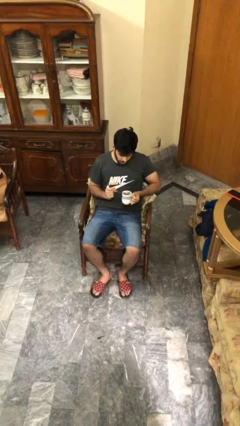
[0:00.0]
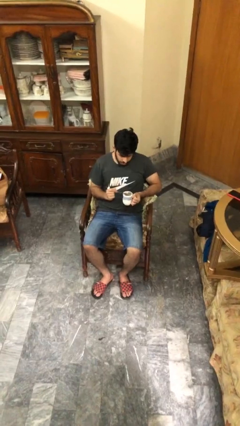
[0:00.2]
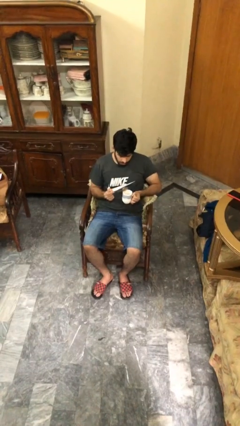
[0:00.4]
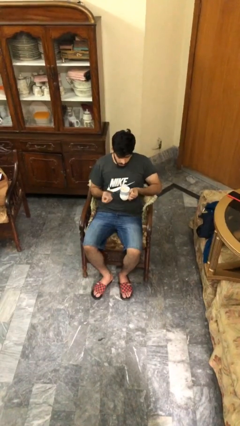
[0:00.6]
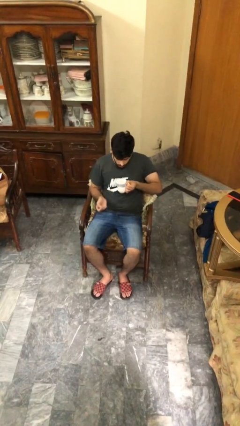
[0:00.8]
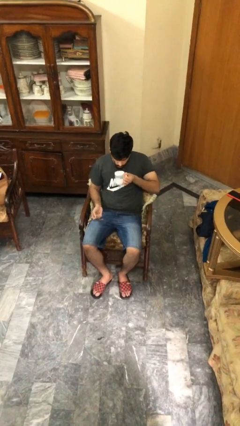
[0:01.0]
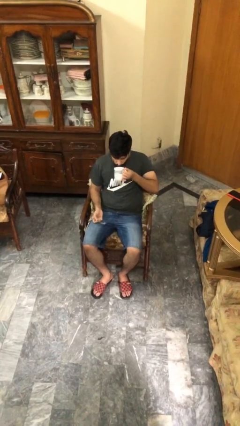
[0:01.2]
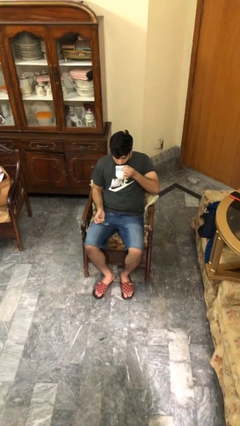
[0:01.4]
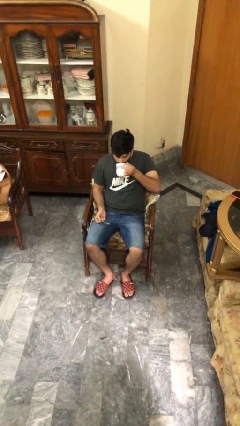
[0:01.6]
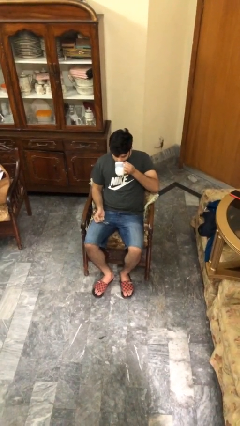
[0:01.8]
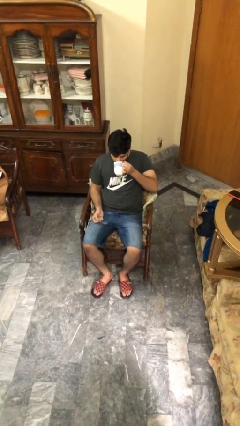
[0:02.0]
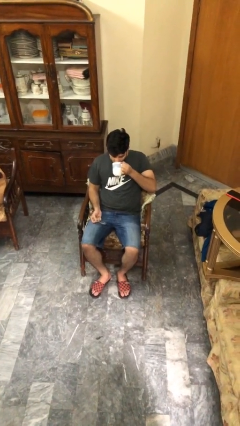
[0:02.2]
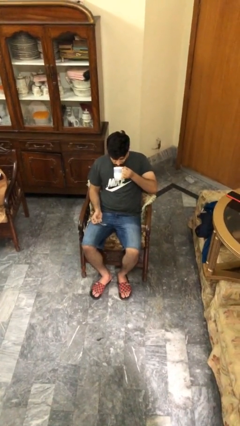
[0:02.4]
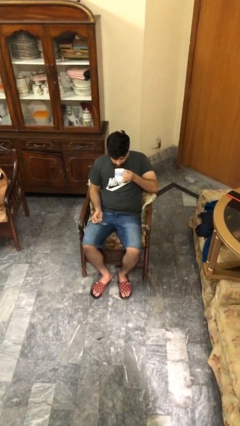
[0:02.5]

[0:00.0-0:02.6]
person drinks from mug

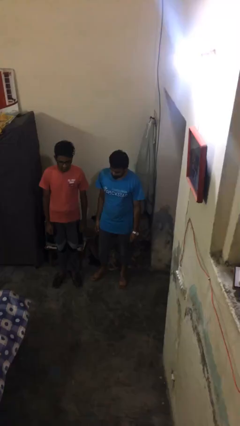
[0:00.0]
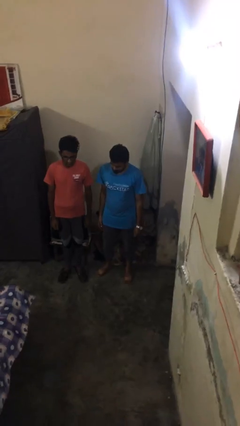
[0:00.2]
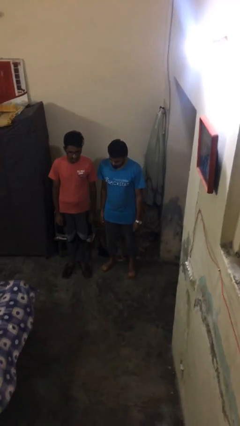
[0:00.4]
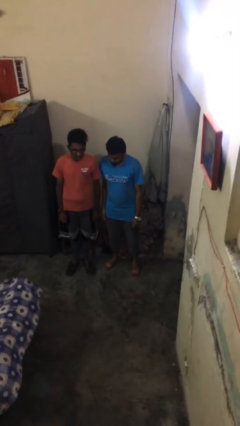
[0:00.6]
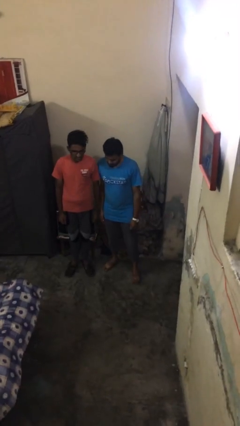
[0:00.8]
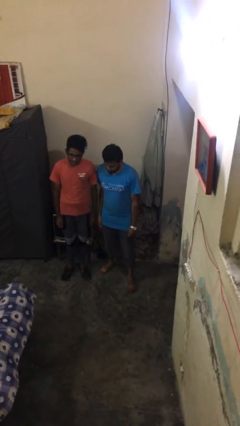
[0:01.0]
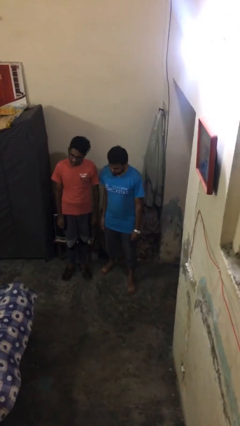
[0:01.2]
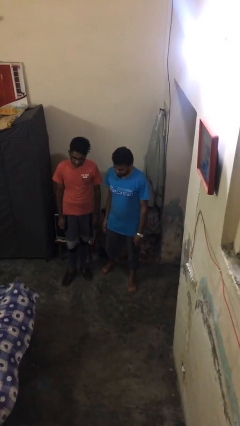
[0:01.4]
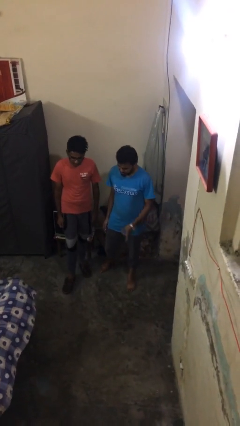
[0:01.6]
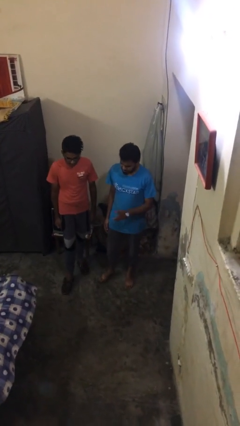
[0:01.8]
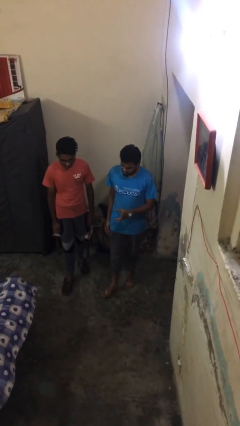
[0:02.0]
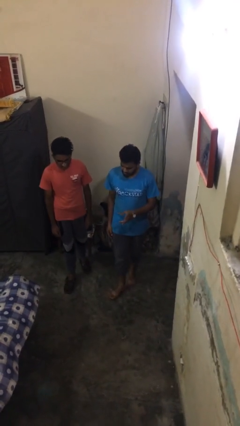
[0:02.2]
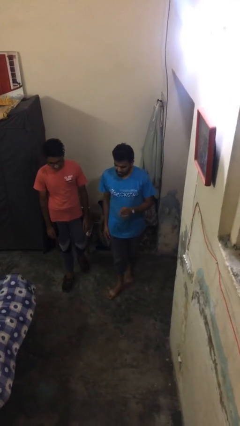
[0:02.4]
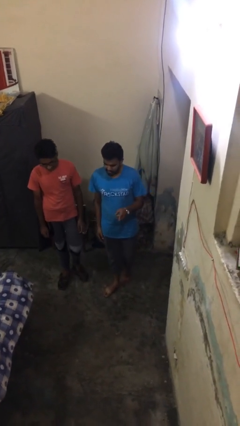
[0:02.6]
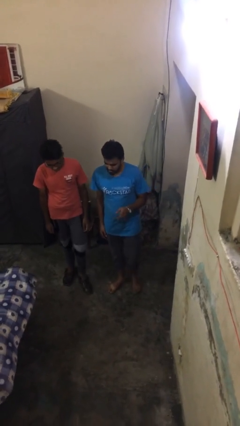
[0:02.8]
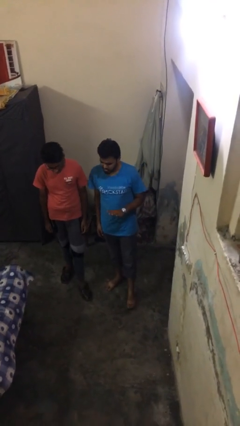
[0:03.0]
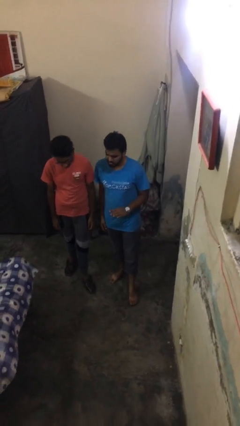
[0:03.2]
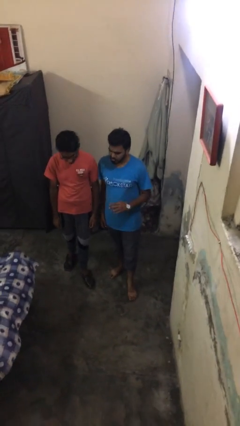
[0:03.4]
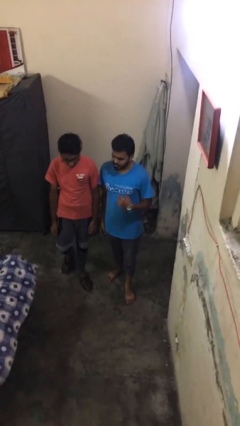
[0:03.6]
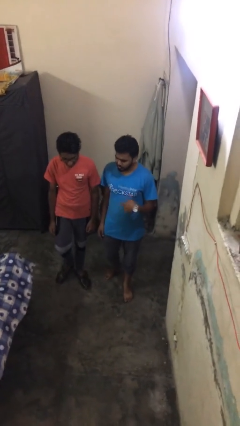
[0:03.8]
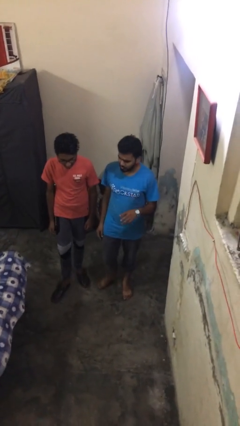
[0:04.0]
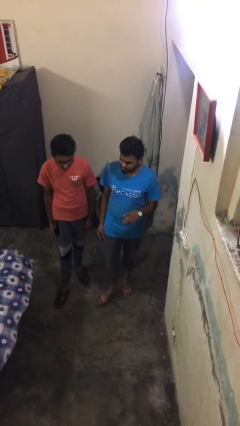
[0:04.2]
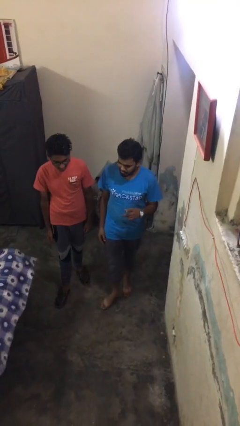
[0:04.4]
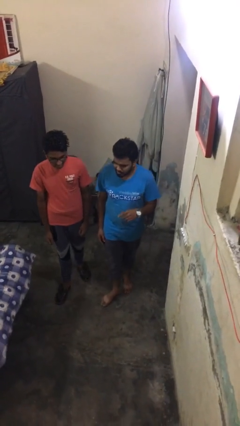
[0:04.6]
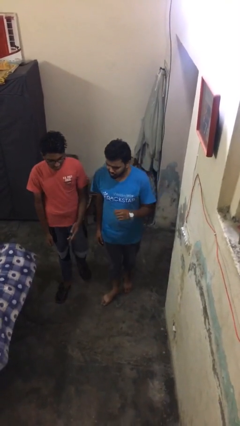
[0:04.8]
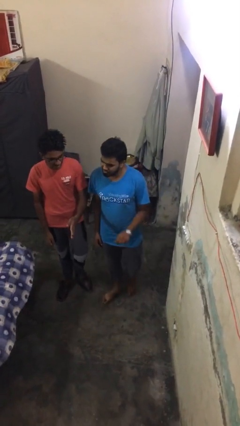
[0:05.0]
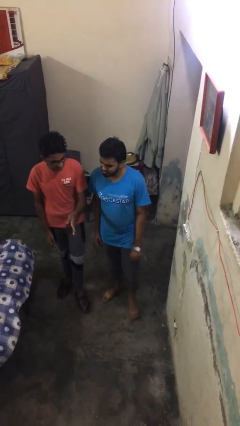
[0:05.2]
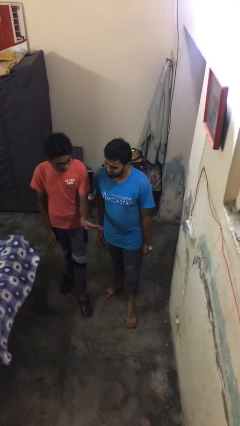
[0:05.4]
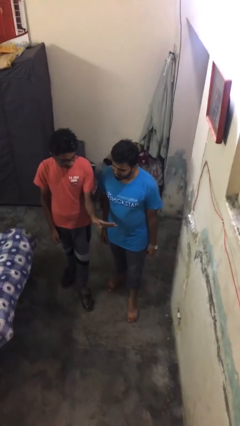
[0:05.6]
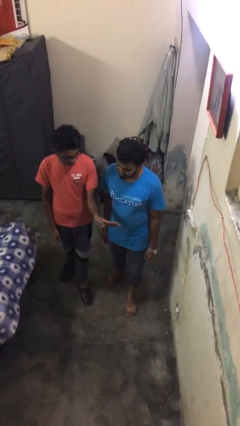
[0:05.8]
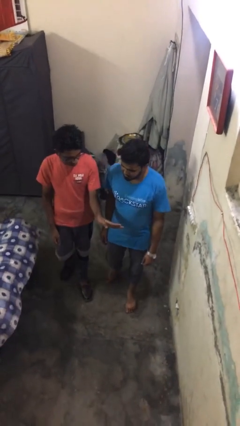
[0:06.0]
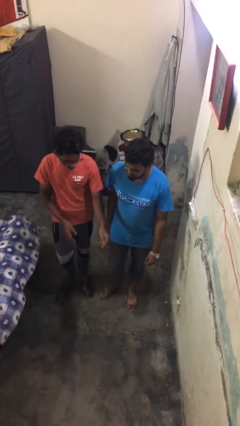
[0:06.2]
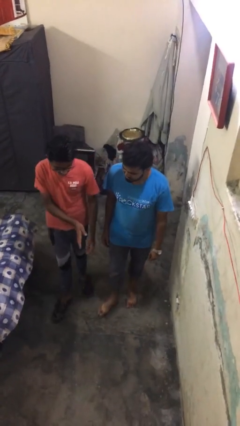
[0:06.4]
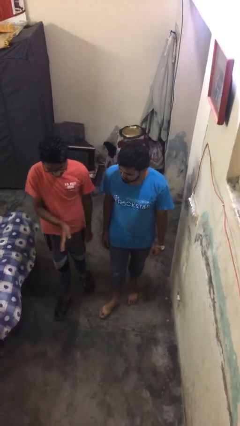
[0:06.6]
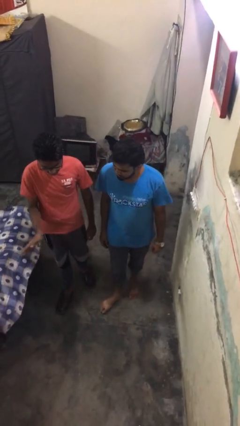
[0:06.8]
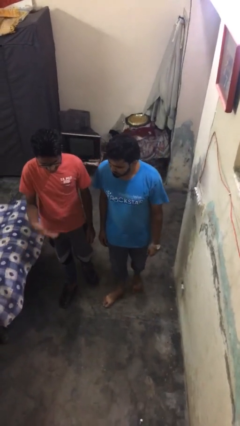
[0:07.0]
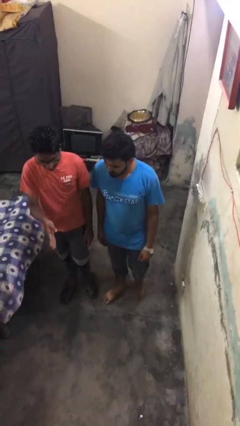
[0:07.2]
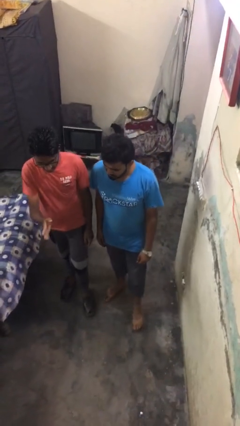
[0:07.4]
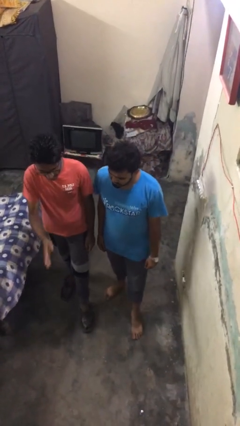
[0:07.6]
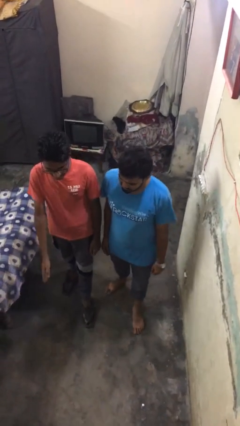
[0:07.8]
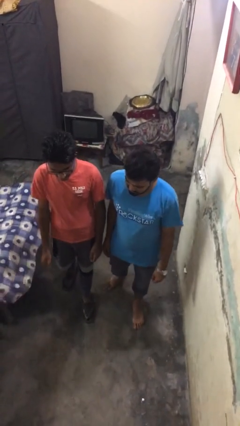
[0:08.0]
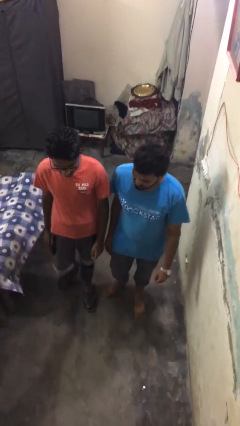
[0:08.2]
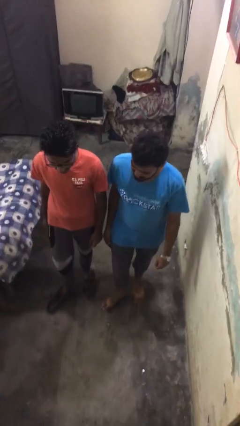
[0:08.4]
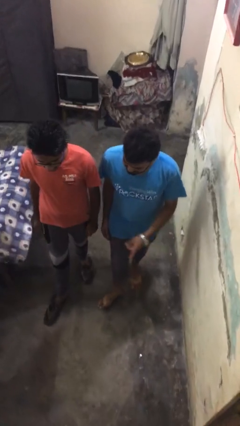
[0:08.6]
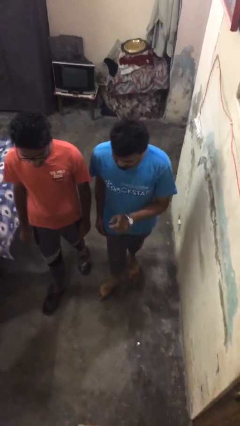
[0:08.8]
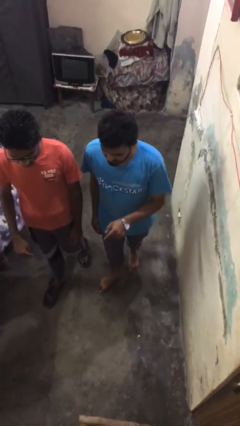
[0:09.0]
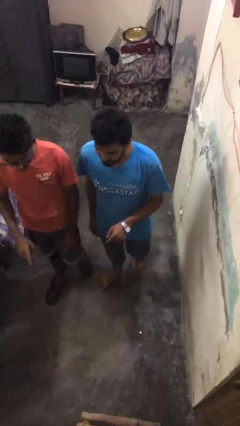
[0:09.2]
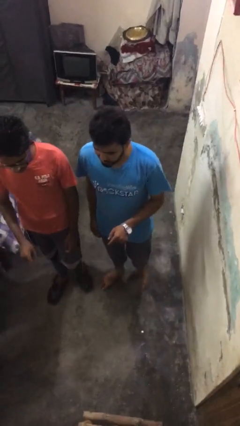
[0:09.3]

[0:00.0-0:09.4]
person talks to person

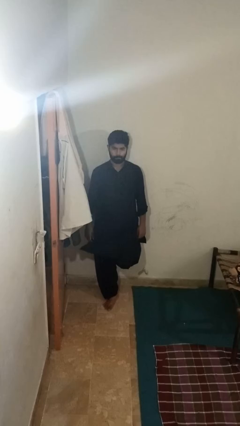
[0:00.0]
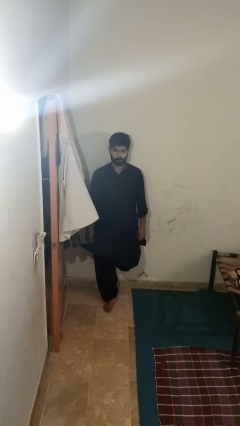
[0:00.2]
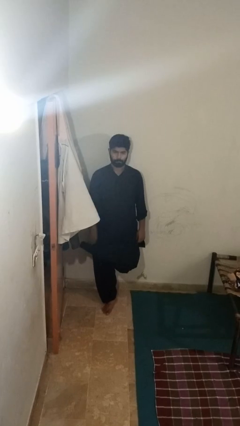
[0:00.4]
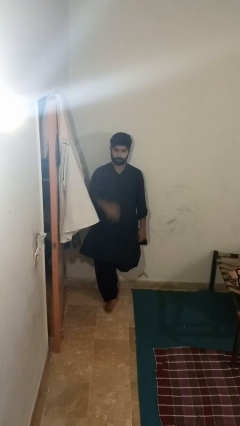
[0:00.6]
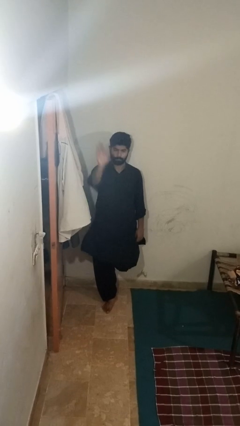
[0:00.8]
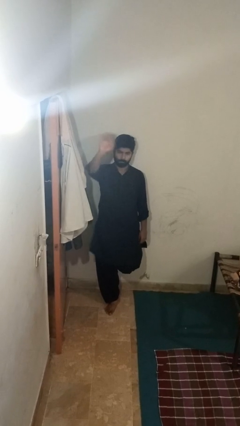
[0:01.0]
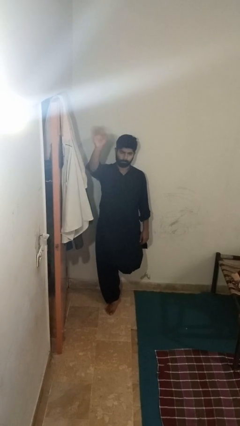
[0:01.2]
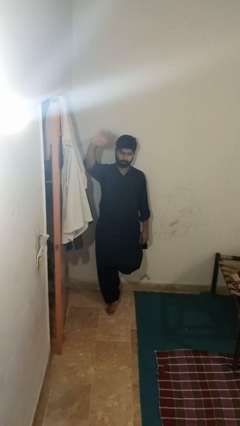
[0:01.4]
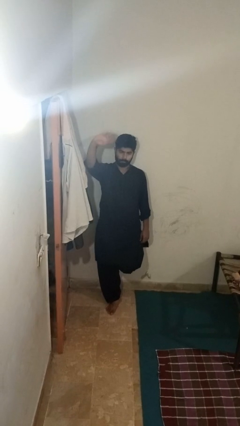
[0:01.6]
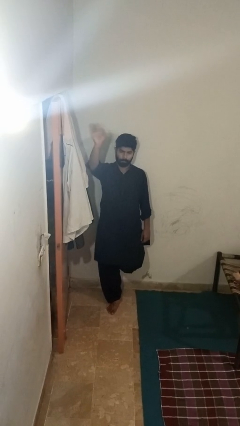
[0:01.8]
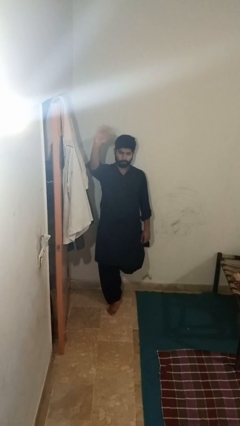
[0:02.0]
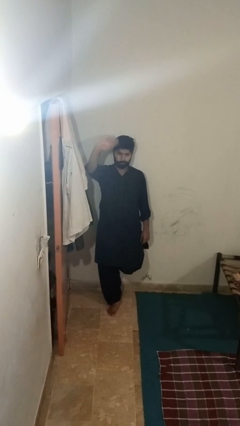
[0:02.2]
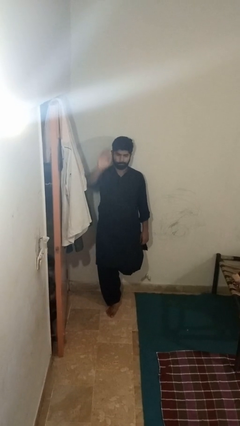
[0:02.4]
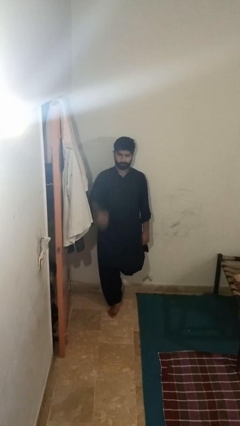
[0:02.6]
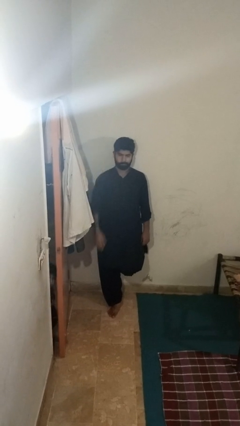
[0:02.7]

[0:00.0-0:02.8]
person waves at person

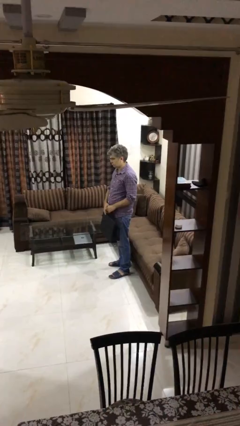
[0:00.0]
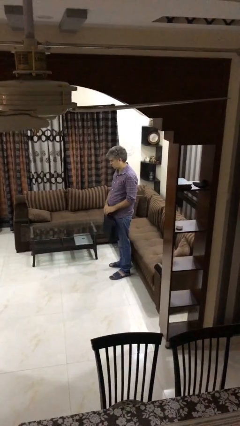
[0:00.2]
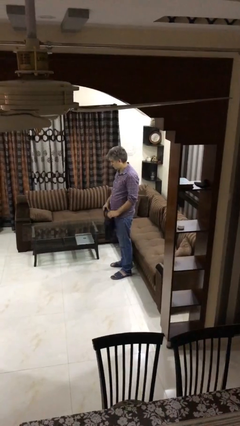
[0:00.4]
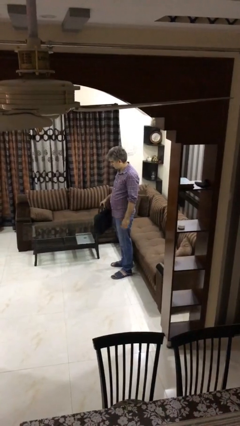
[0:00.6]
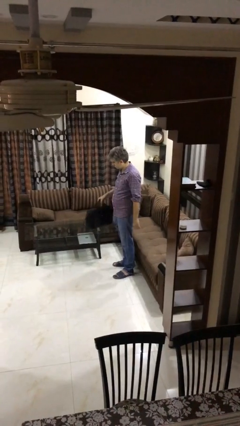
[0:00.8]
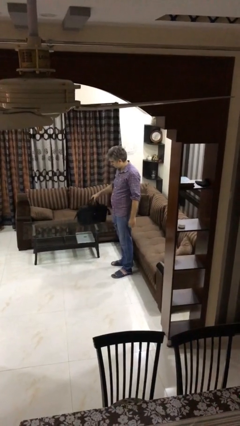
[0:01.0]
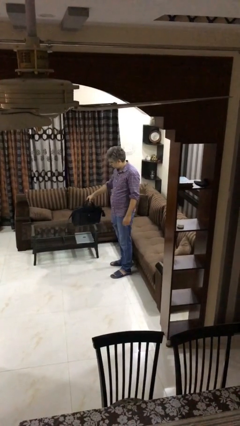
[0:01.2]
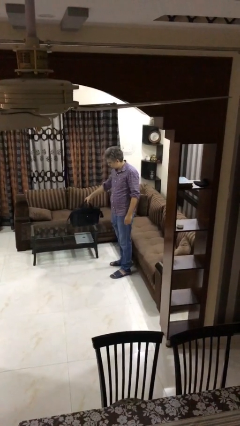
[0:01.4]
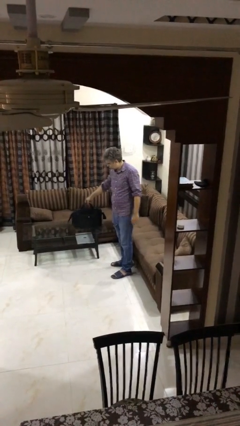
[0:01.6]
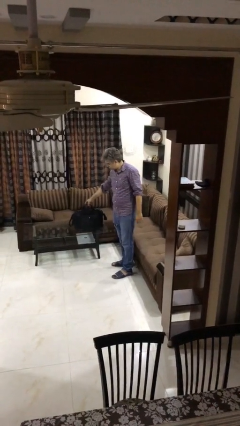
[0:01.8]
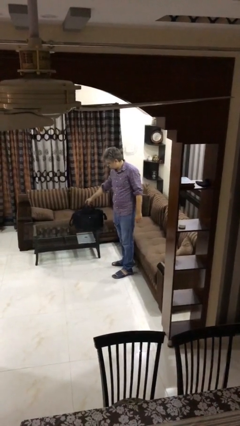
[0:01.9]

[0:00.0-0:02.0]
person puts down object on table

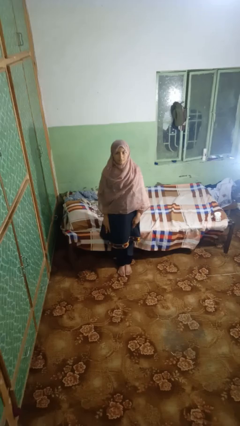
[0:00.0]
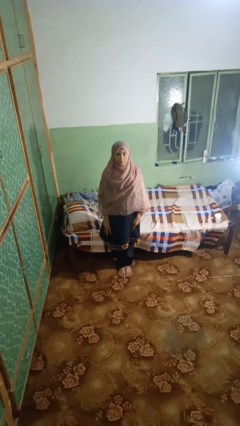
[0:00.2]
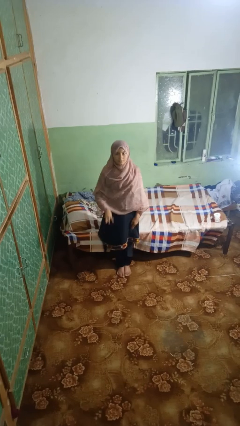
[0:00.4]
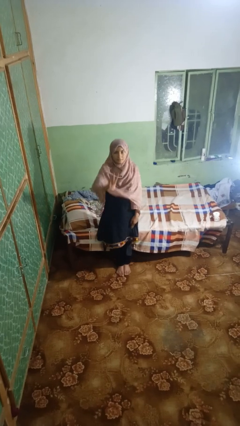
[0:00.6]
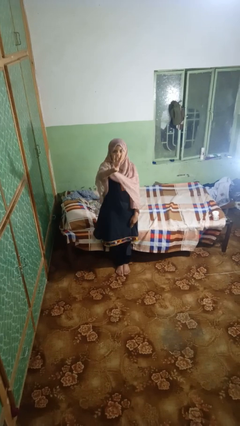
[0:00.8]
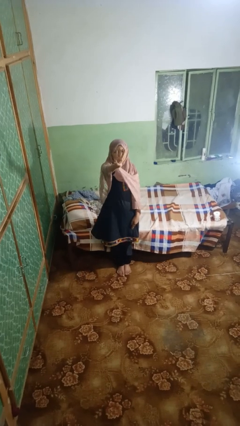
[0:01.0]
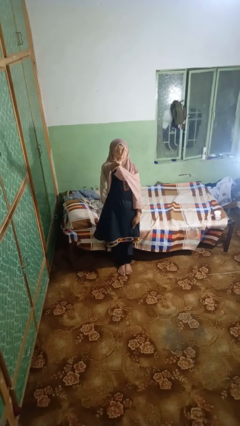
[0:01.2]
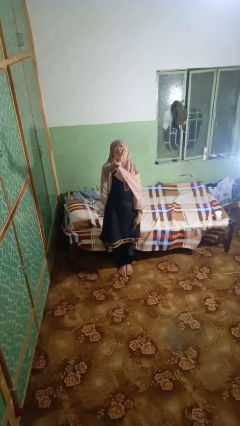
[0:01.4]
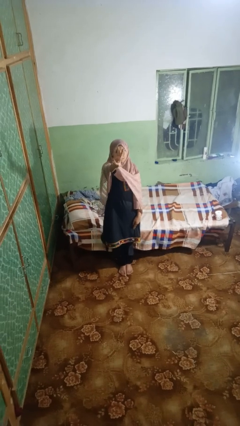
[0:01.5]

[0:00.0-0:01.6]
person gestures number three
